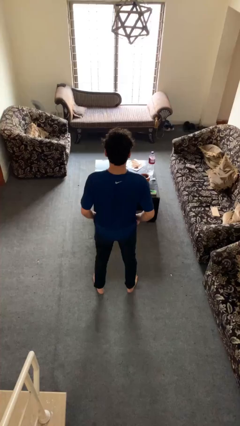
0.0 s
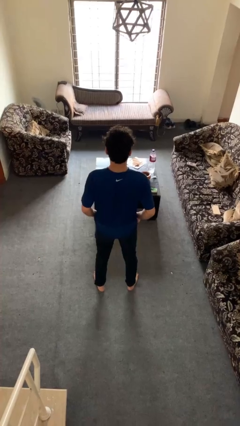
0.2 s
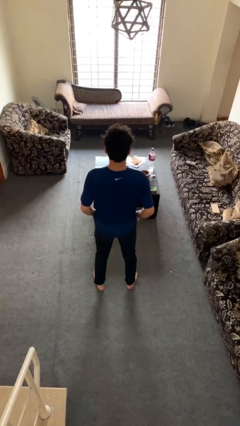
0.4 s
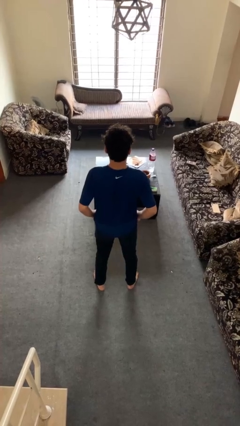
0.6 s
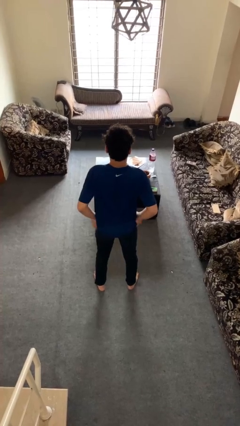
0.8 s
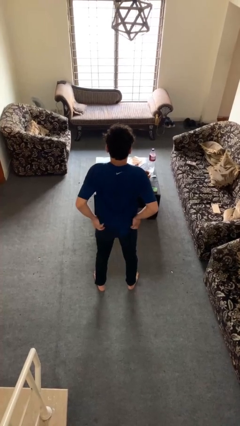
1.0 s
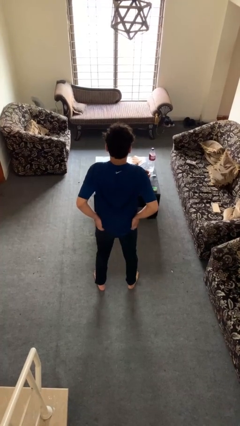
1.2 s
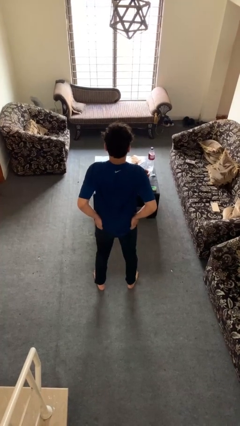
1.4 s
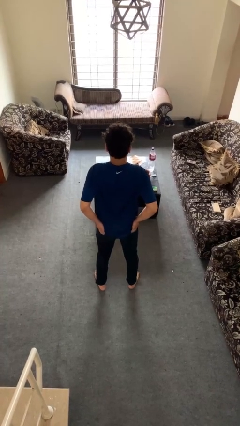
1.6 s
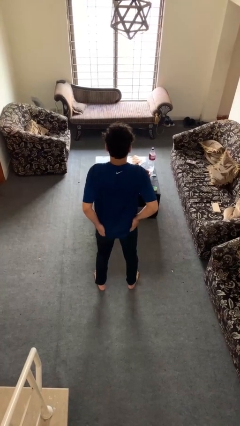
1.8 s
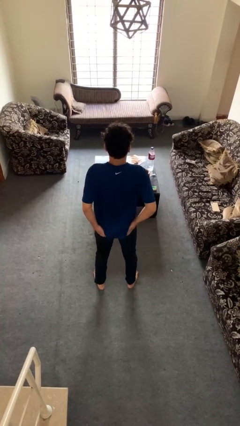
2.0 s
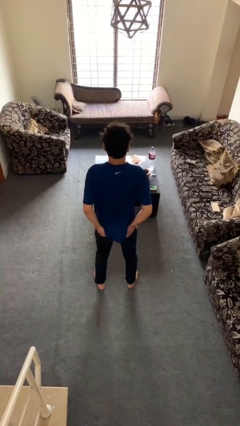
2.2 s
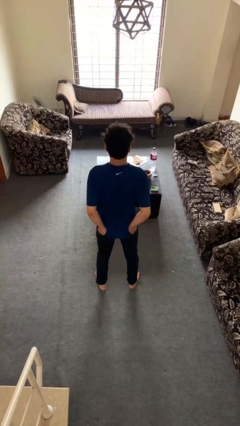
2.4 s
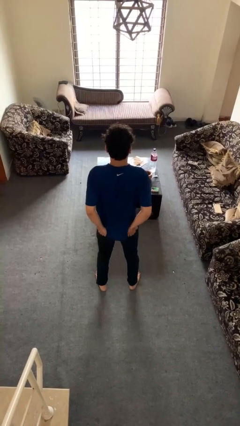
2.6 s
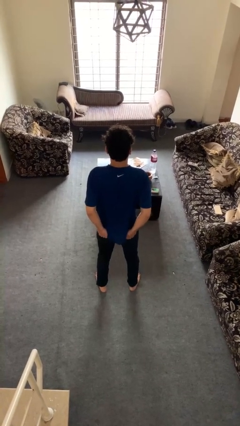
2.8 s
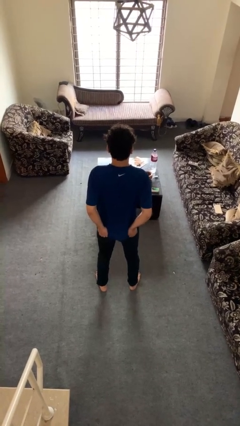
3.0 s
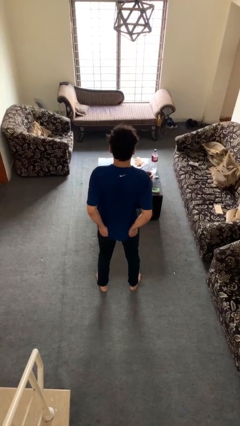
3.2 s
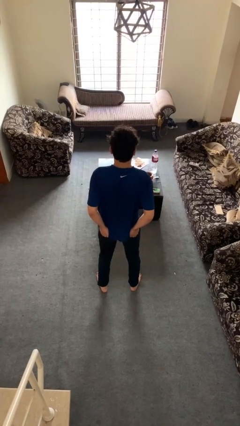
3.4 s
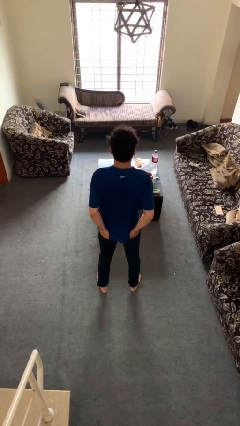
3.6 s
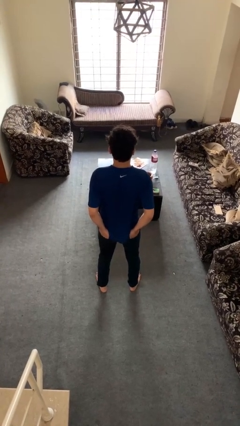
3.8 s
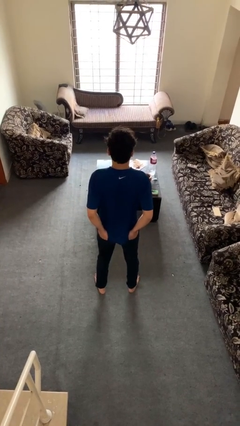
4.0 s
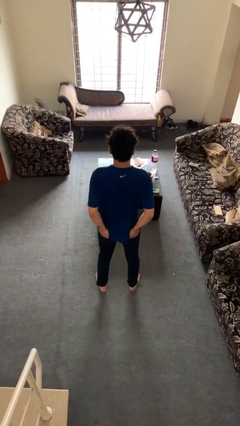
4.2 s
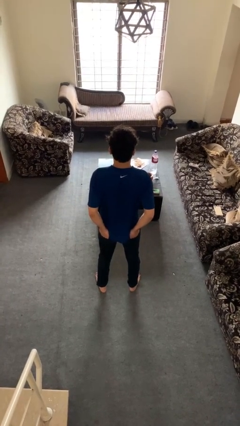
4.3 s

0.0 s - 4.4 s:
person puts hands in back pockets

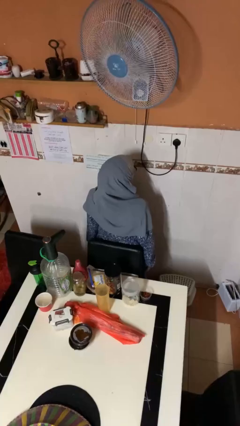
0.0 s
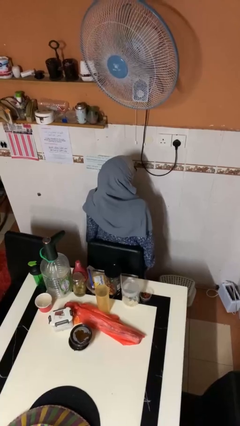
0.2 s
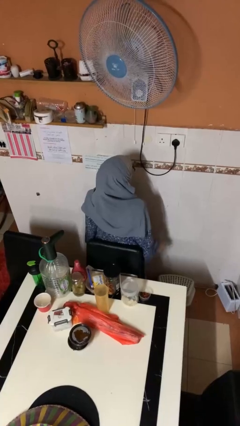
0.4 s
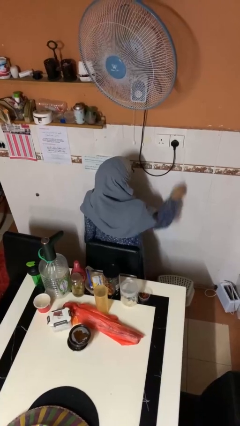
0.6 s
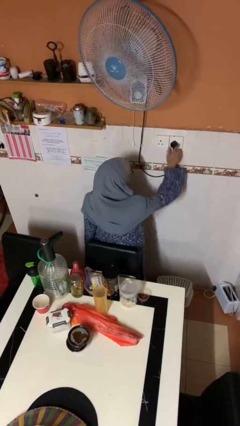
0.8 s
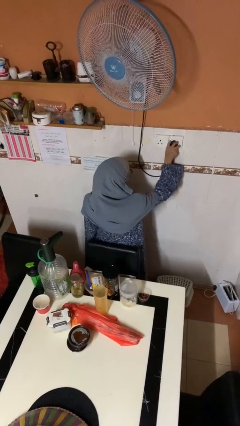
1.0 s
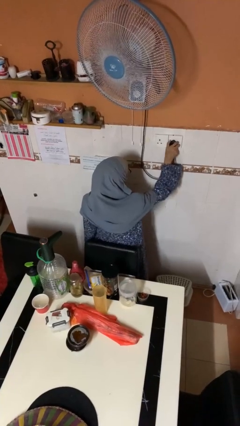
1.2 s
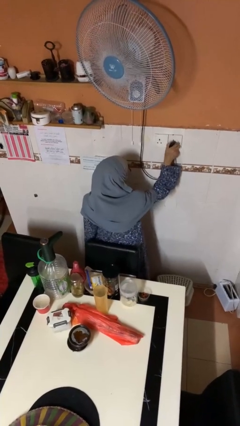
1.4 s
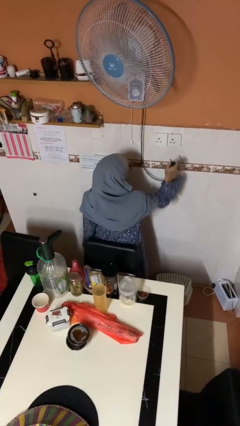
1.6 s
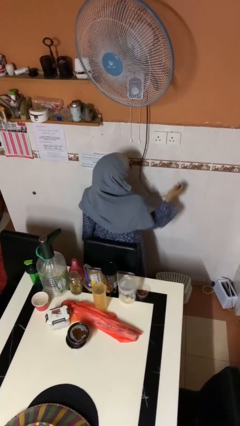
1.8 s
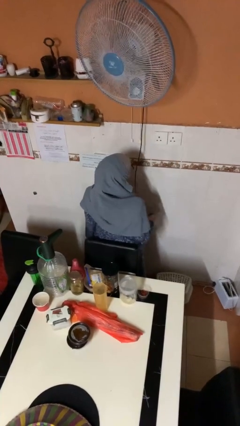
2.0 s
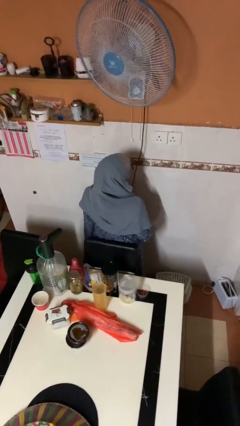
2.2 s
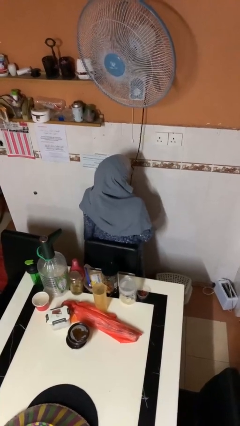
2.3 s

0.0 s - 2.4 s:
person unplugs from electrical socket

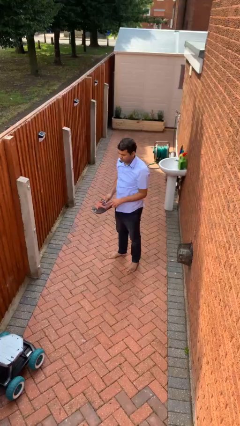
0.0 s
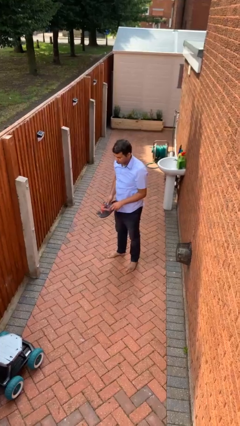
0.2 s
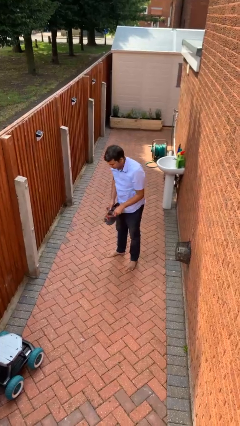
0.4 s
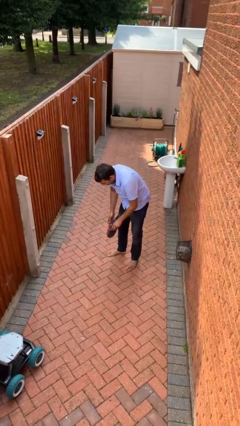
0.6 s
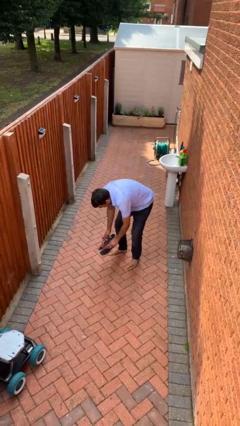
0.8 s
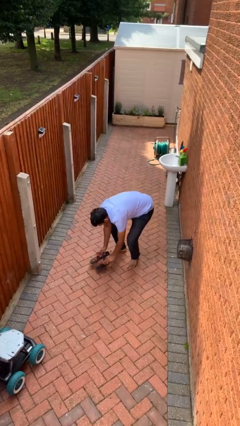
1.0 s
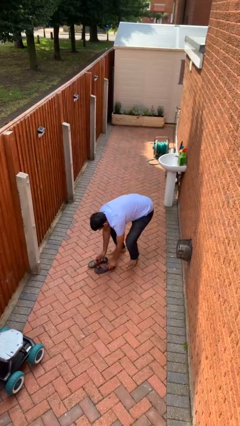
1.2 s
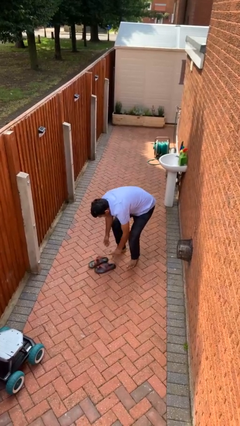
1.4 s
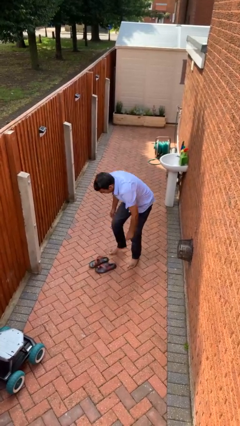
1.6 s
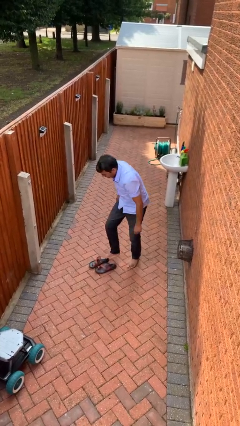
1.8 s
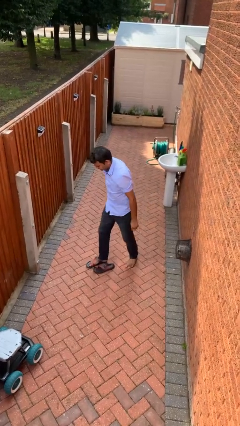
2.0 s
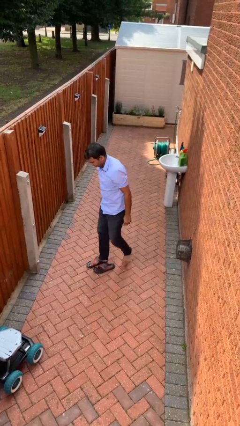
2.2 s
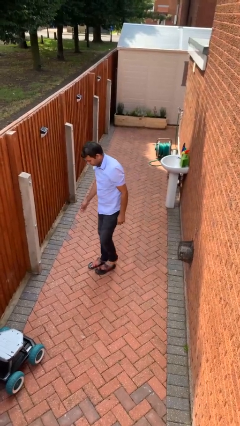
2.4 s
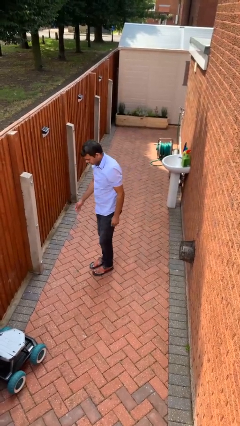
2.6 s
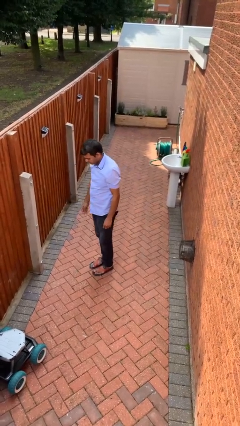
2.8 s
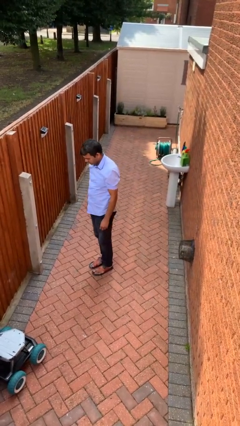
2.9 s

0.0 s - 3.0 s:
person puts on shoes

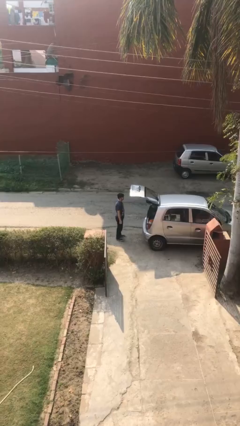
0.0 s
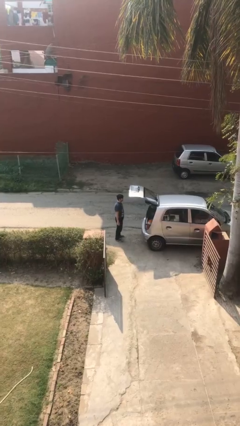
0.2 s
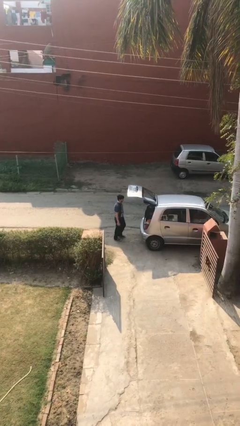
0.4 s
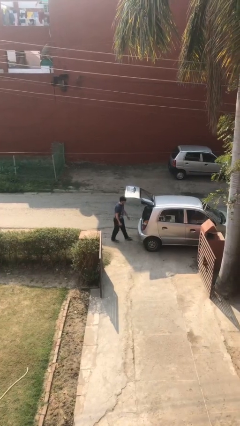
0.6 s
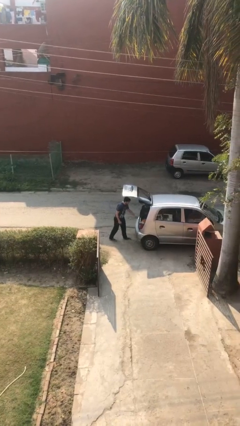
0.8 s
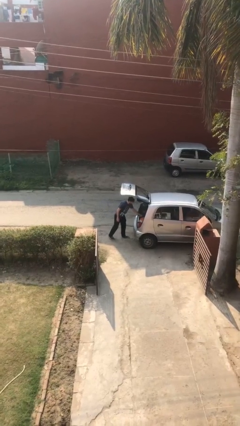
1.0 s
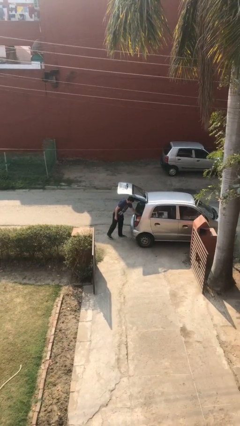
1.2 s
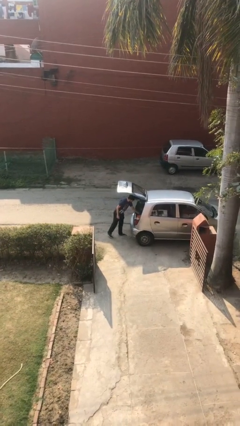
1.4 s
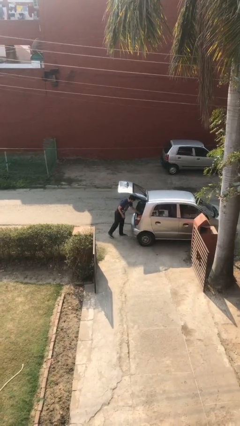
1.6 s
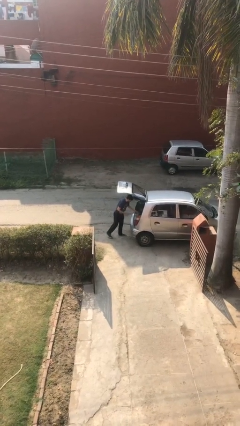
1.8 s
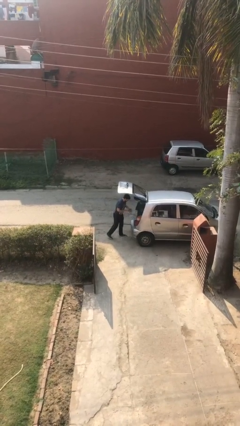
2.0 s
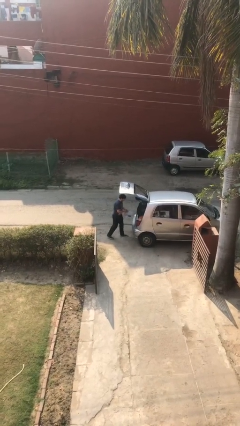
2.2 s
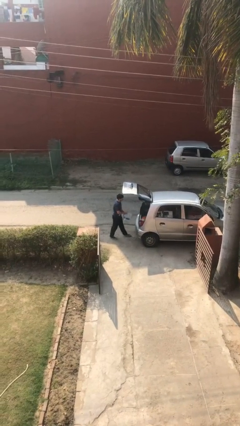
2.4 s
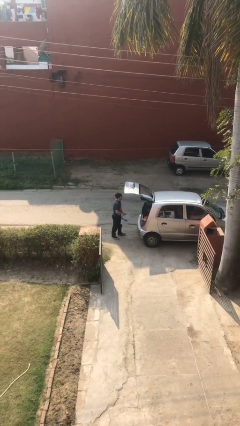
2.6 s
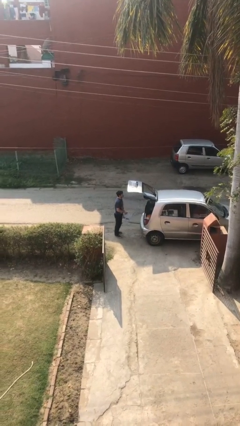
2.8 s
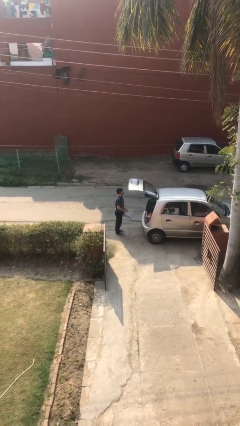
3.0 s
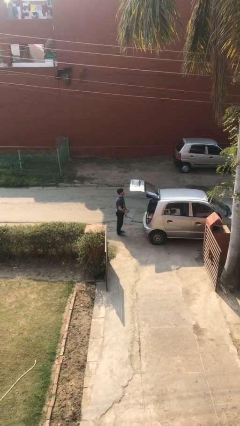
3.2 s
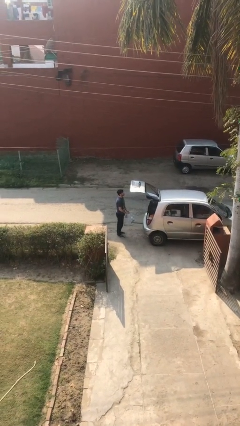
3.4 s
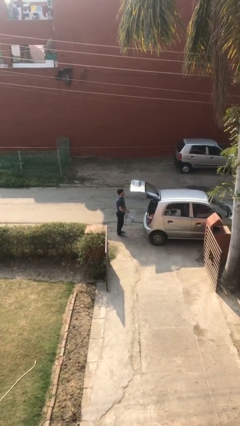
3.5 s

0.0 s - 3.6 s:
person unloads car

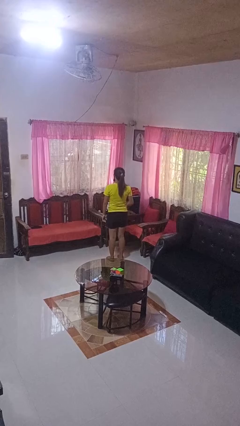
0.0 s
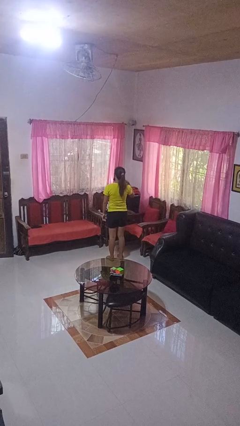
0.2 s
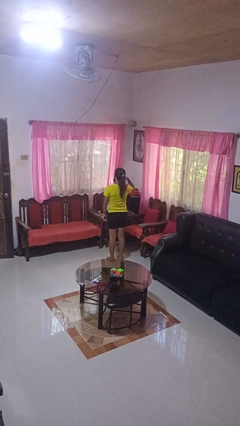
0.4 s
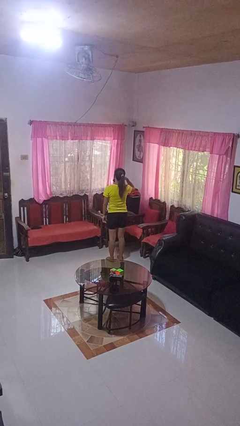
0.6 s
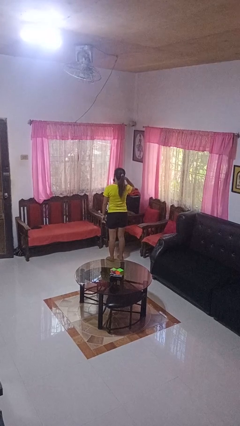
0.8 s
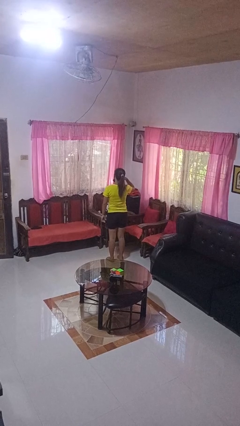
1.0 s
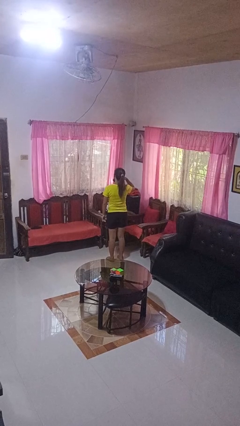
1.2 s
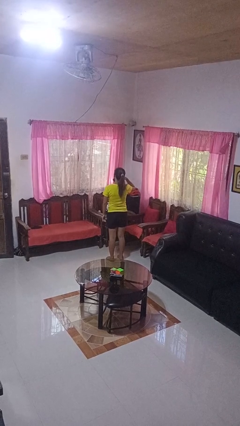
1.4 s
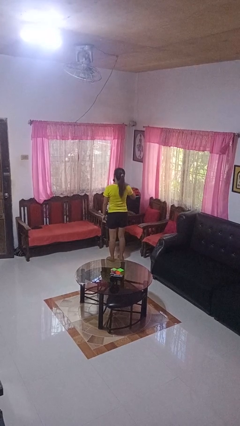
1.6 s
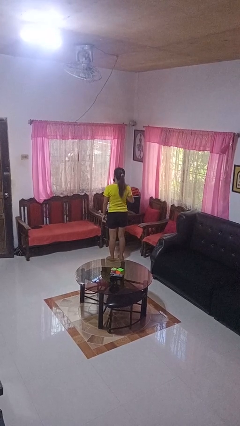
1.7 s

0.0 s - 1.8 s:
person gestures call me

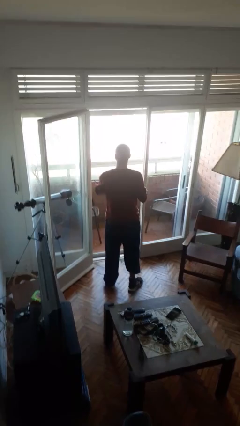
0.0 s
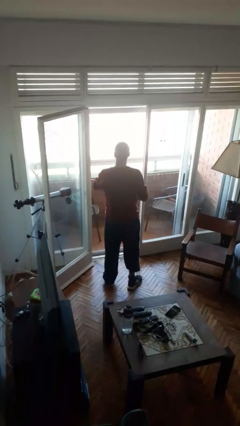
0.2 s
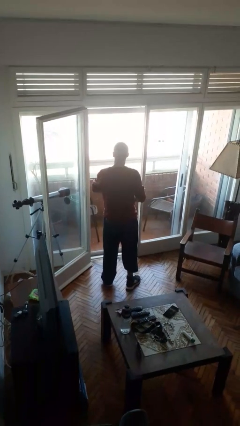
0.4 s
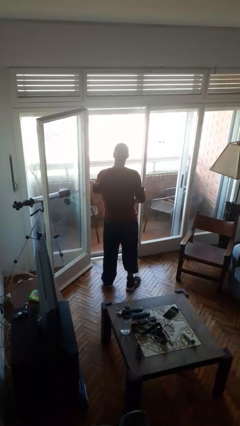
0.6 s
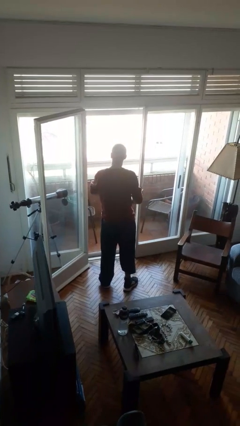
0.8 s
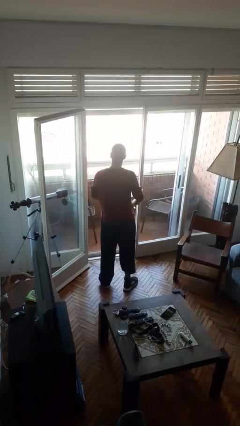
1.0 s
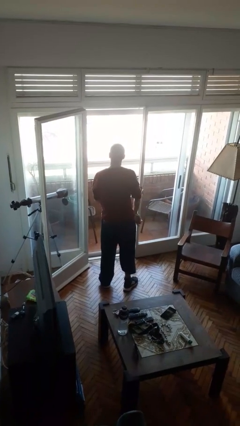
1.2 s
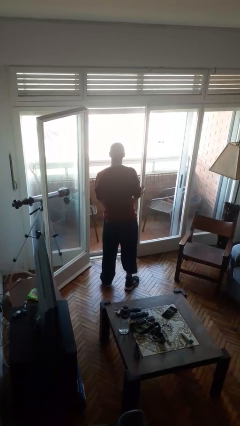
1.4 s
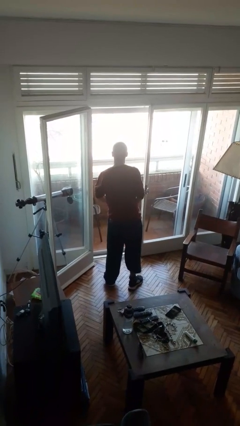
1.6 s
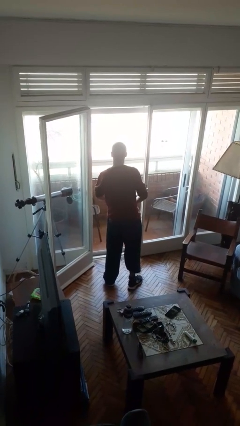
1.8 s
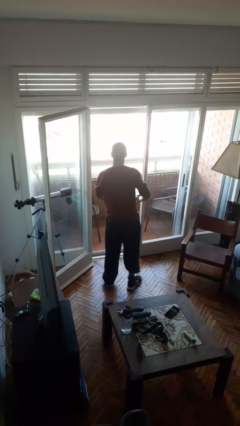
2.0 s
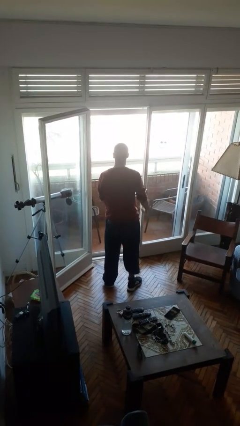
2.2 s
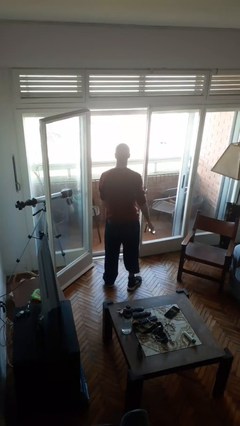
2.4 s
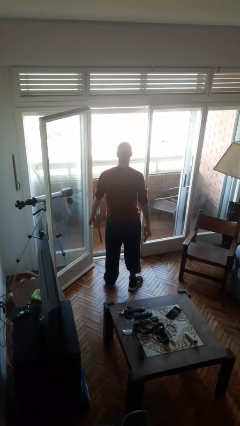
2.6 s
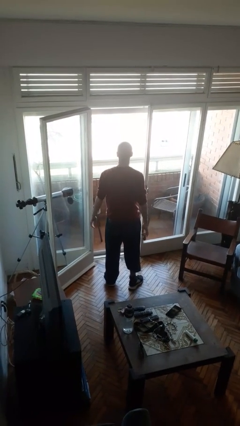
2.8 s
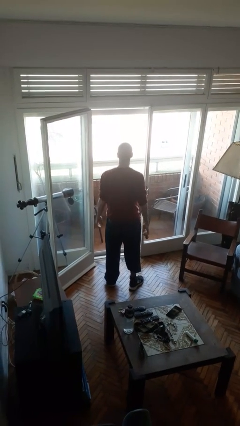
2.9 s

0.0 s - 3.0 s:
person takes off wristwatch
